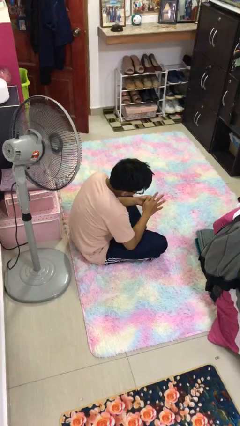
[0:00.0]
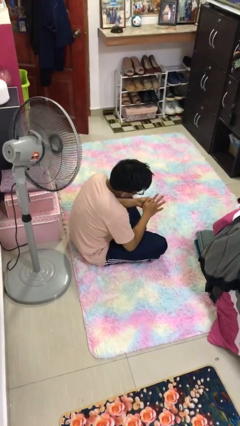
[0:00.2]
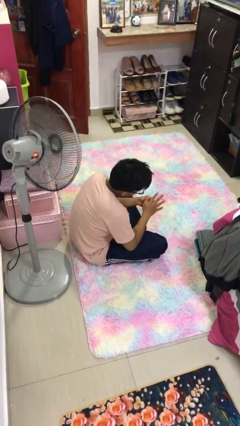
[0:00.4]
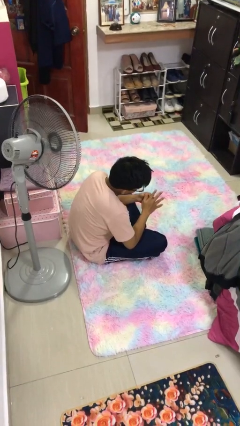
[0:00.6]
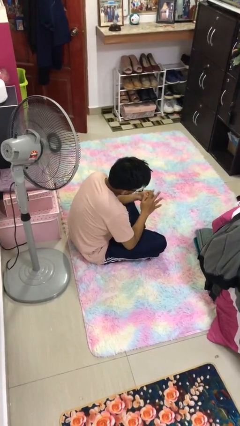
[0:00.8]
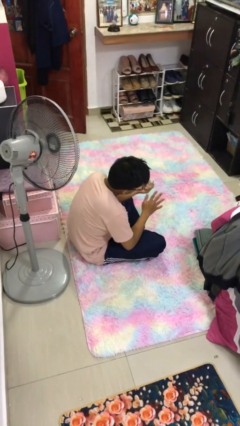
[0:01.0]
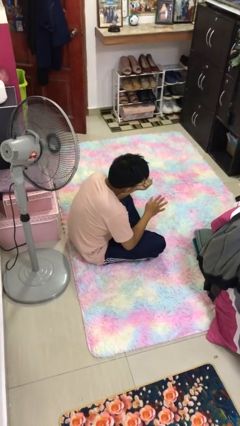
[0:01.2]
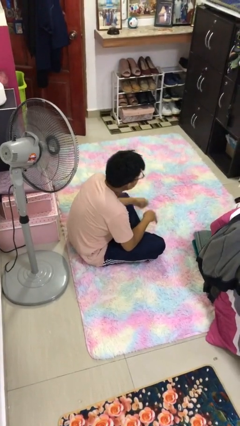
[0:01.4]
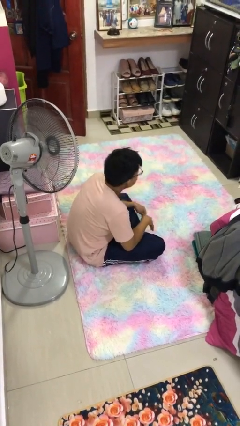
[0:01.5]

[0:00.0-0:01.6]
person takes off ring

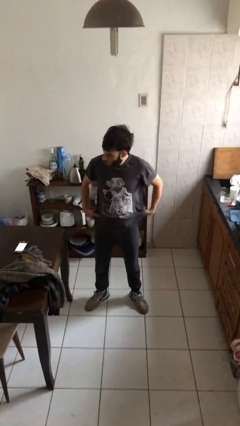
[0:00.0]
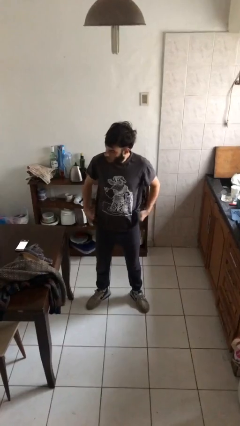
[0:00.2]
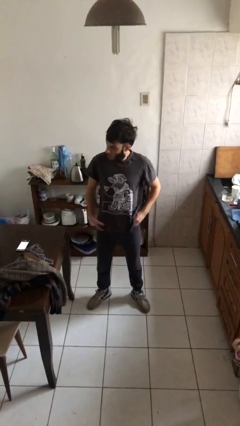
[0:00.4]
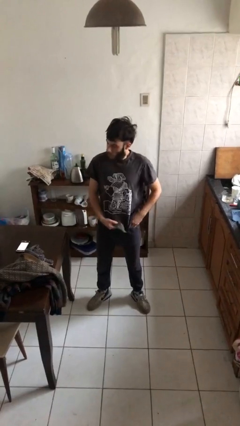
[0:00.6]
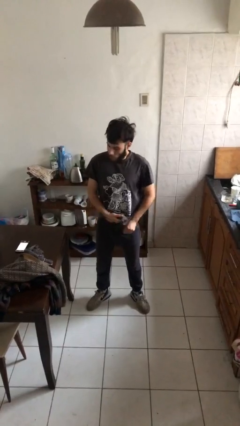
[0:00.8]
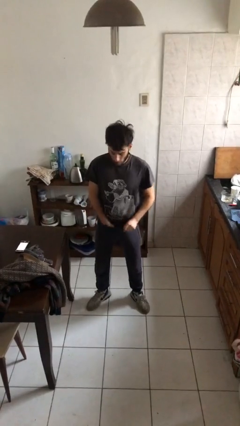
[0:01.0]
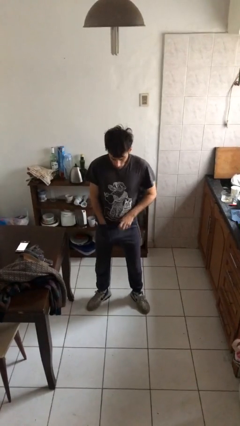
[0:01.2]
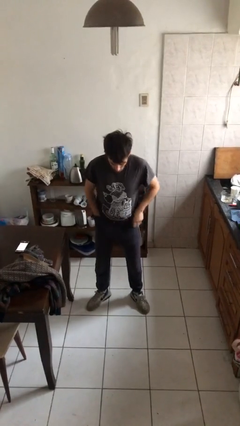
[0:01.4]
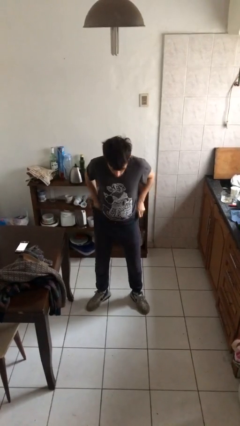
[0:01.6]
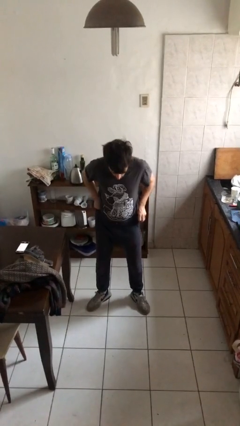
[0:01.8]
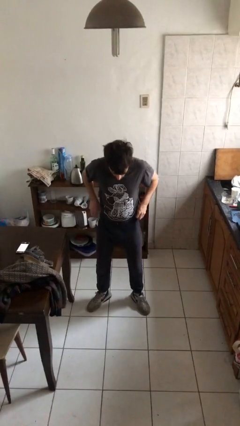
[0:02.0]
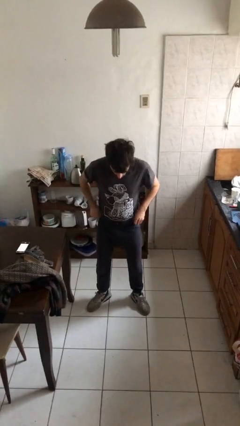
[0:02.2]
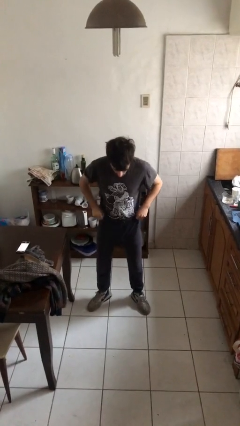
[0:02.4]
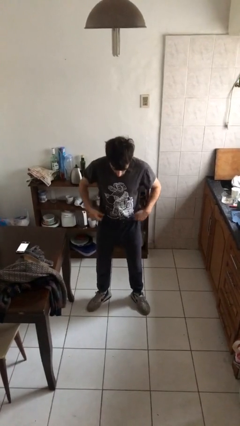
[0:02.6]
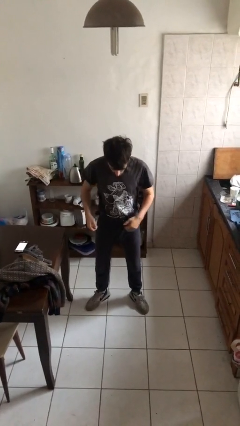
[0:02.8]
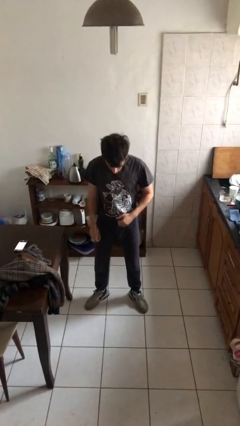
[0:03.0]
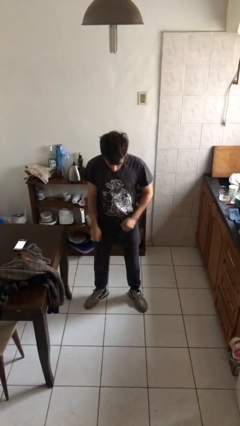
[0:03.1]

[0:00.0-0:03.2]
person tucks in shirt

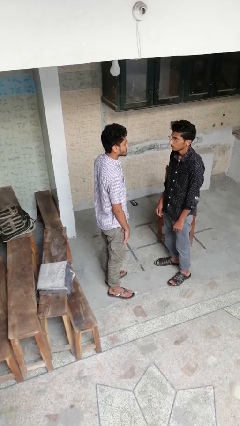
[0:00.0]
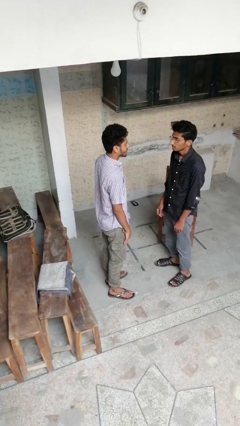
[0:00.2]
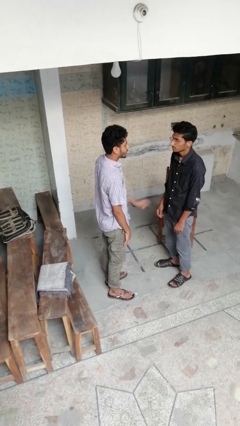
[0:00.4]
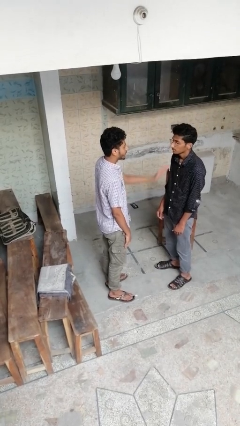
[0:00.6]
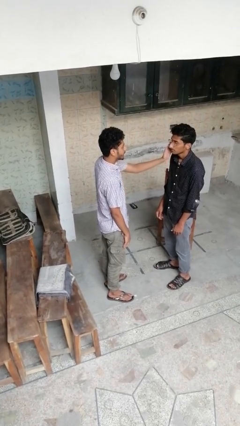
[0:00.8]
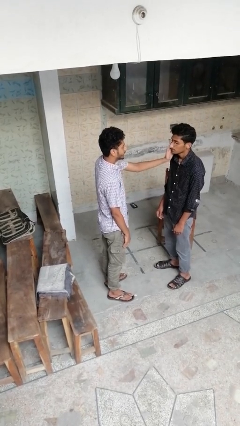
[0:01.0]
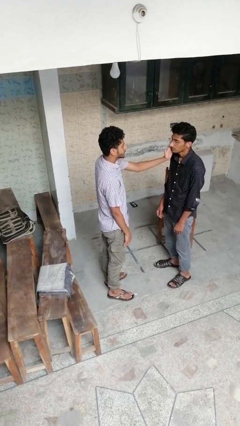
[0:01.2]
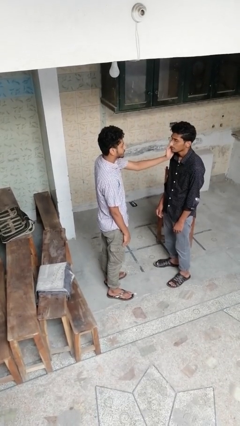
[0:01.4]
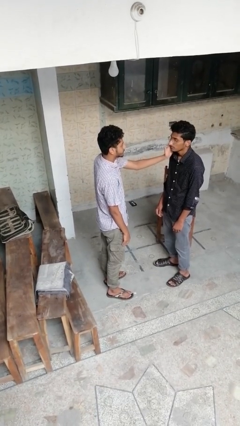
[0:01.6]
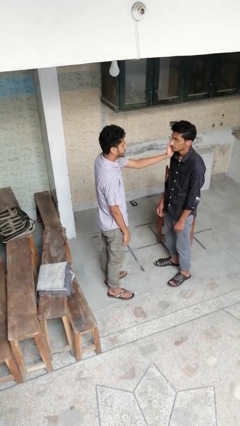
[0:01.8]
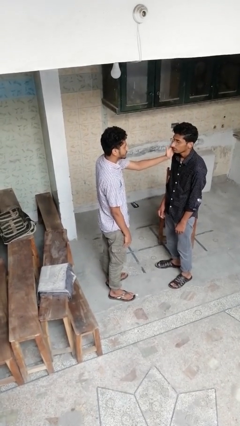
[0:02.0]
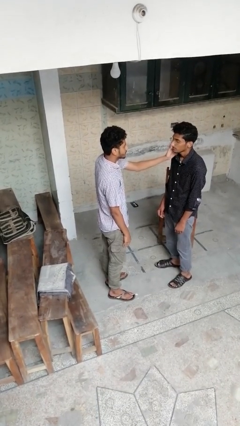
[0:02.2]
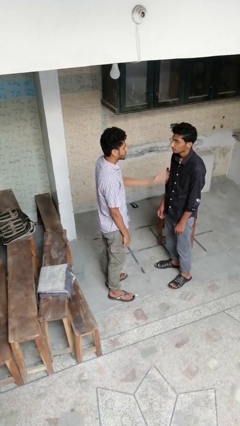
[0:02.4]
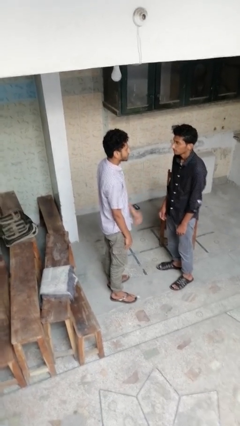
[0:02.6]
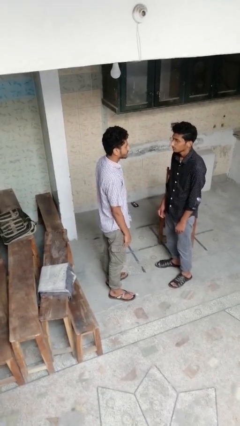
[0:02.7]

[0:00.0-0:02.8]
person touches face of person

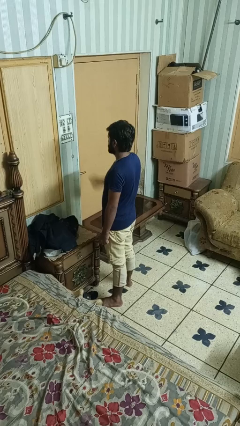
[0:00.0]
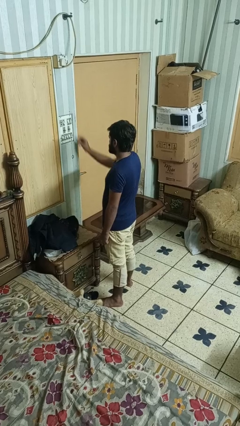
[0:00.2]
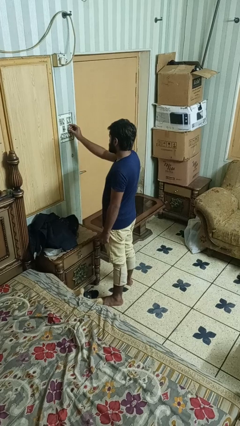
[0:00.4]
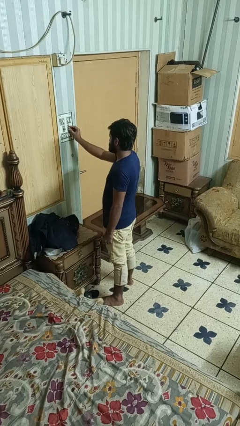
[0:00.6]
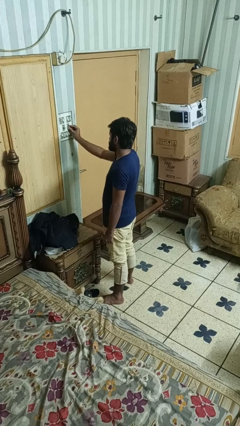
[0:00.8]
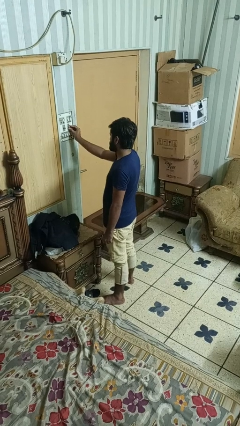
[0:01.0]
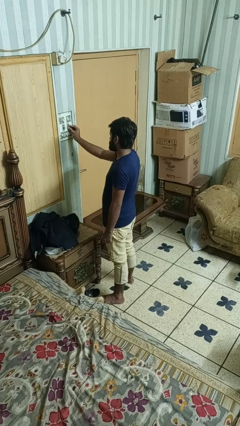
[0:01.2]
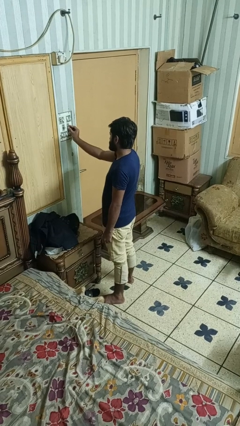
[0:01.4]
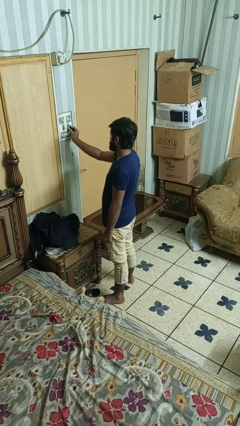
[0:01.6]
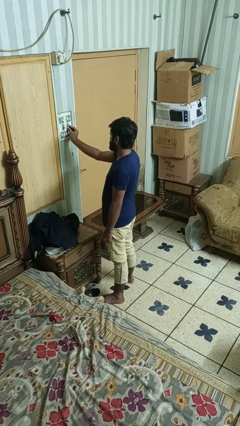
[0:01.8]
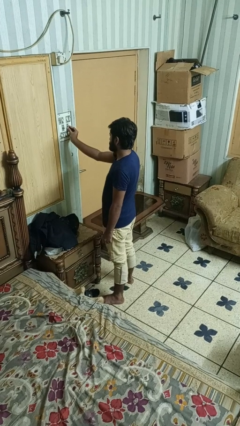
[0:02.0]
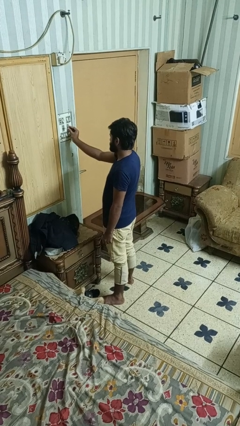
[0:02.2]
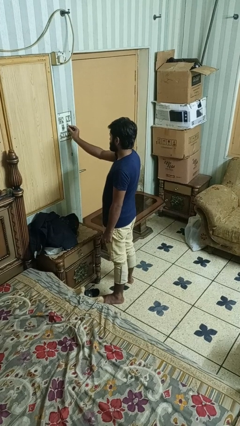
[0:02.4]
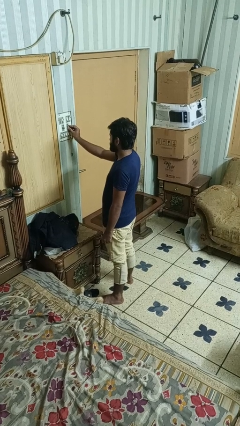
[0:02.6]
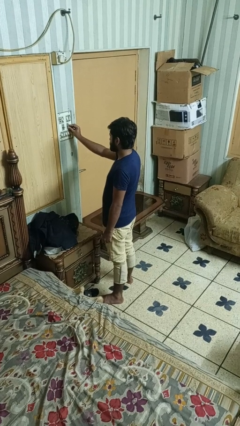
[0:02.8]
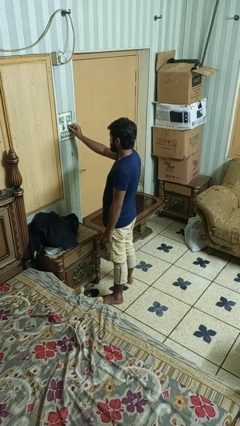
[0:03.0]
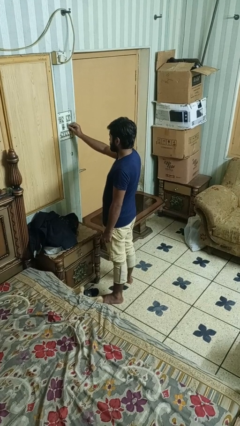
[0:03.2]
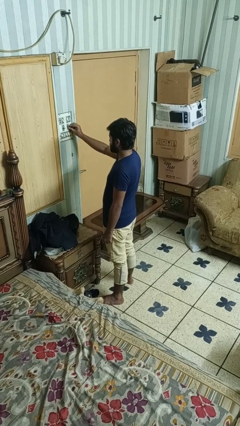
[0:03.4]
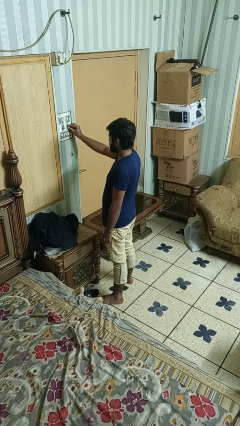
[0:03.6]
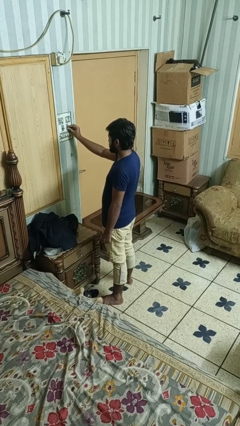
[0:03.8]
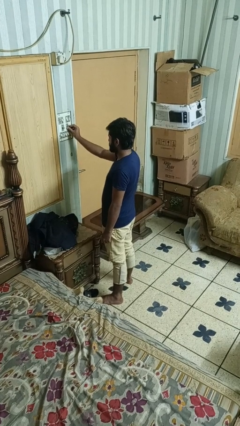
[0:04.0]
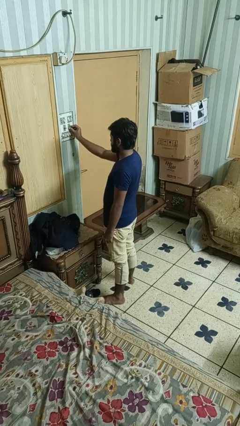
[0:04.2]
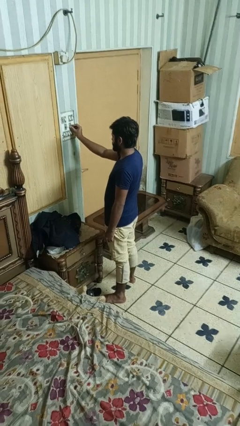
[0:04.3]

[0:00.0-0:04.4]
person adjusts thermostat

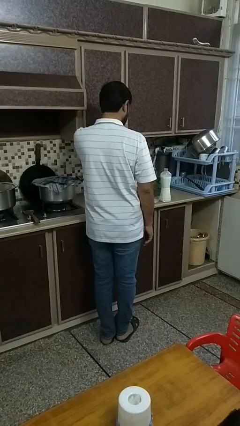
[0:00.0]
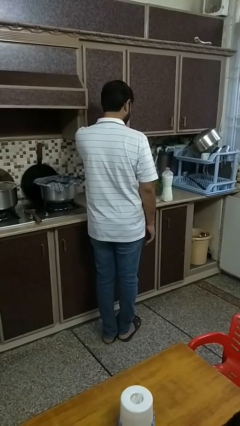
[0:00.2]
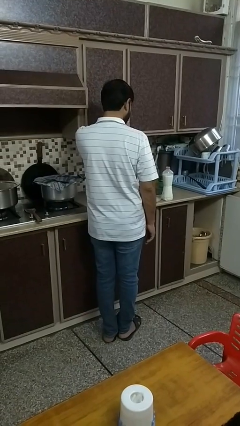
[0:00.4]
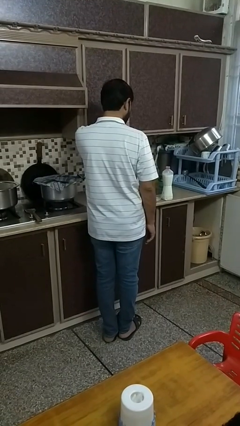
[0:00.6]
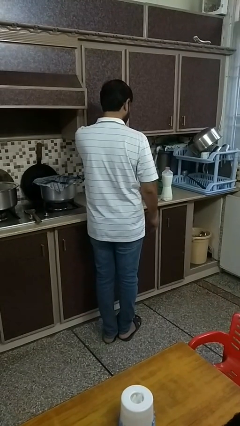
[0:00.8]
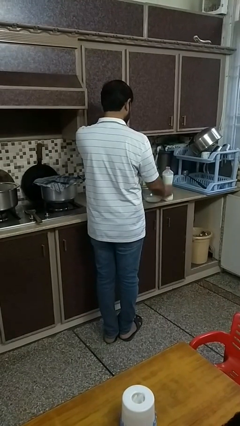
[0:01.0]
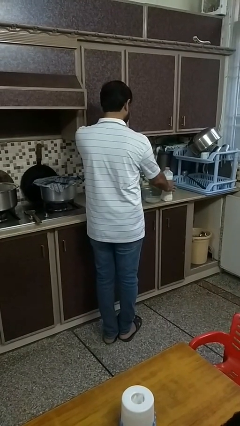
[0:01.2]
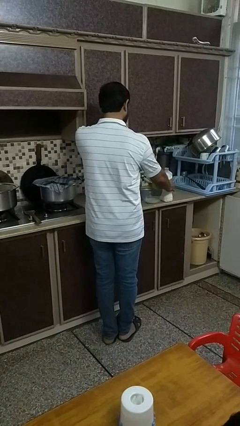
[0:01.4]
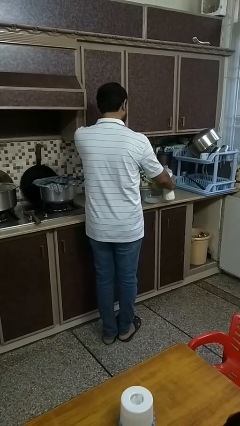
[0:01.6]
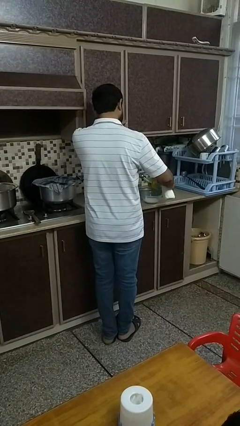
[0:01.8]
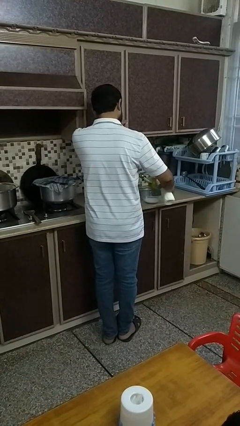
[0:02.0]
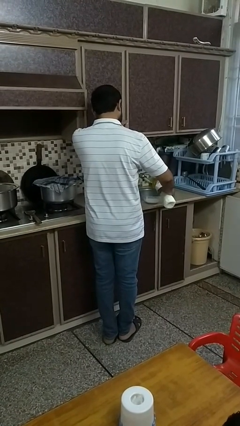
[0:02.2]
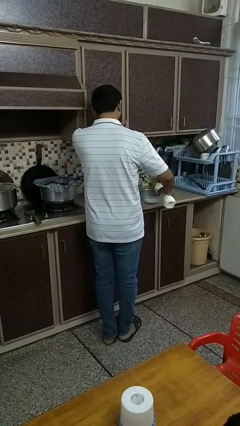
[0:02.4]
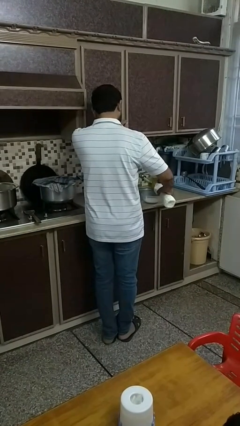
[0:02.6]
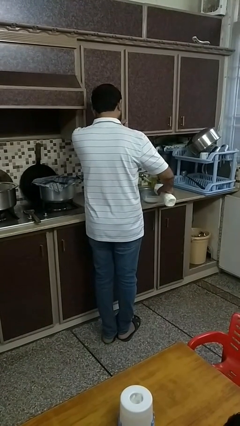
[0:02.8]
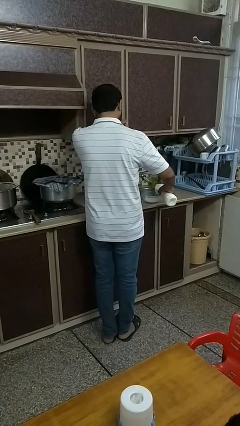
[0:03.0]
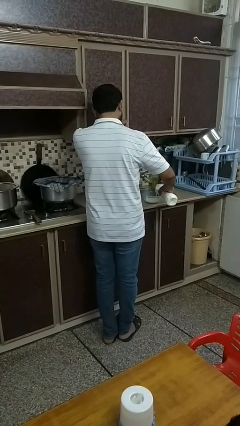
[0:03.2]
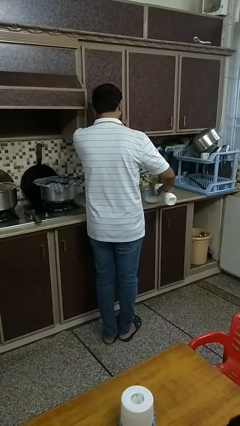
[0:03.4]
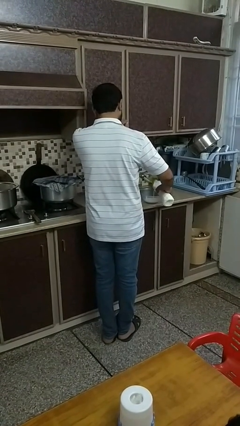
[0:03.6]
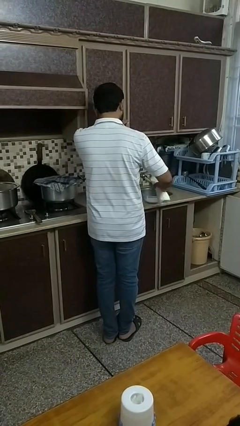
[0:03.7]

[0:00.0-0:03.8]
person pours into bowl

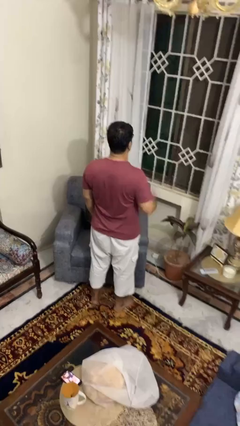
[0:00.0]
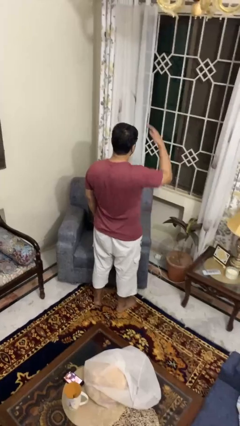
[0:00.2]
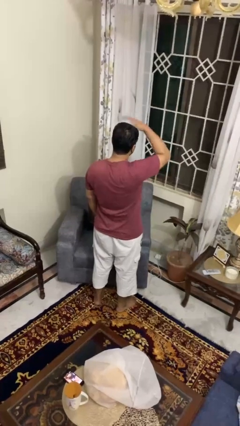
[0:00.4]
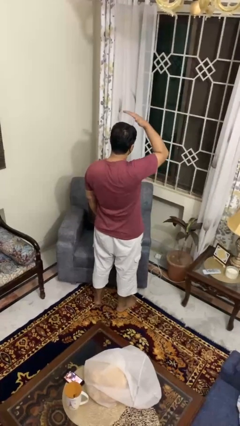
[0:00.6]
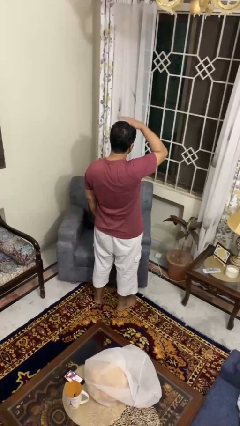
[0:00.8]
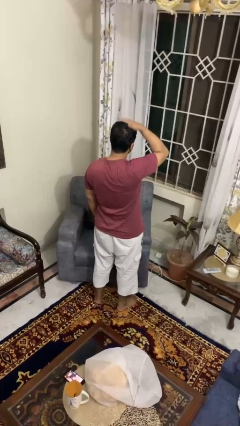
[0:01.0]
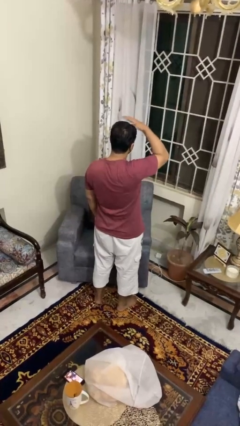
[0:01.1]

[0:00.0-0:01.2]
person pats head

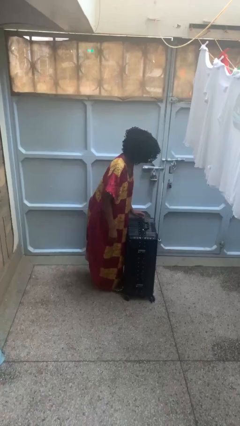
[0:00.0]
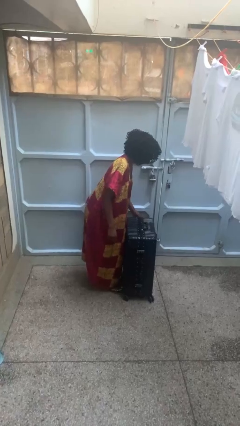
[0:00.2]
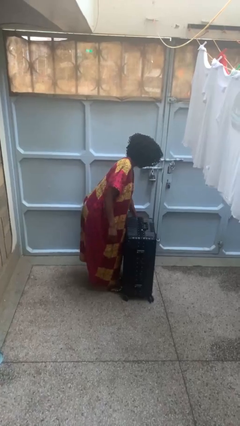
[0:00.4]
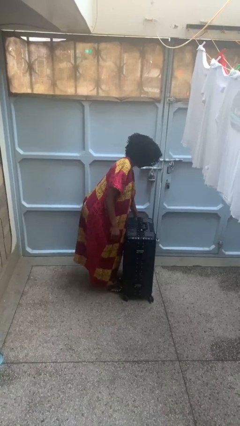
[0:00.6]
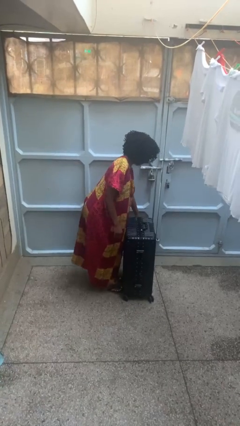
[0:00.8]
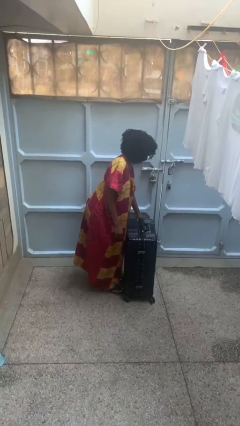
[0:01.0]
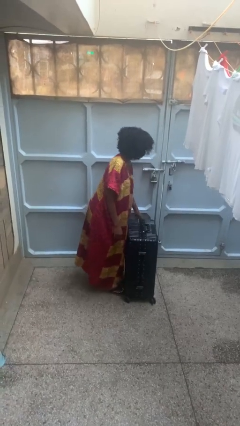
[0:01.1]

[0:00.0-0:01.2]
person closes suitcase
